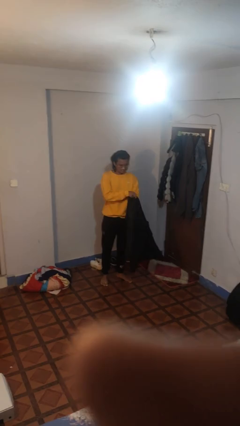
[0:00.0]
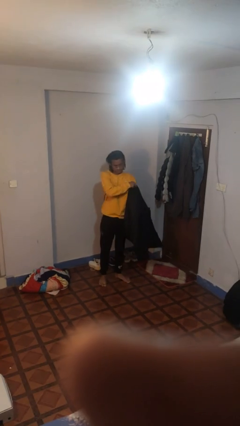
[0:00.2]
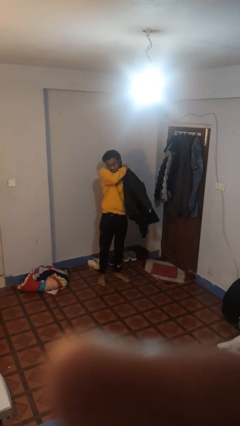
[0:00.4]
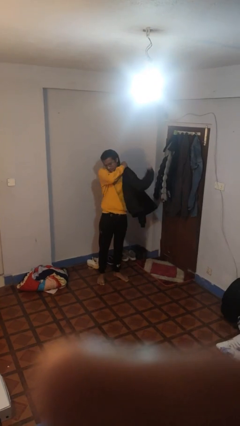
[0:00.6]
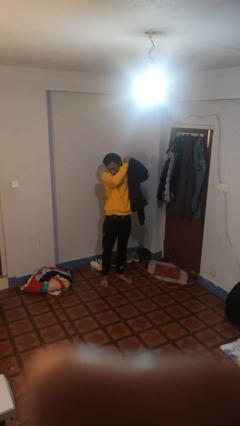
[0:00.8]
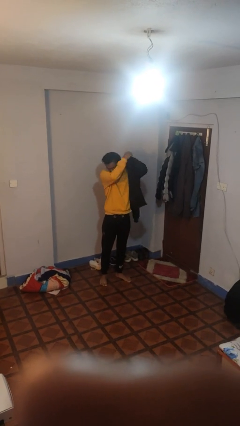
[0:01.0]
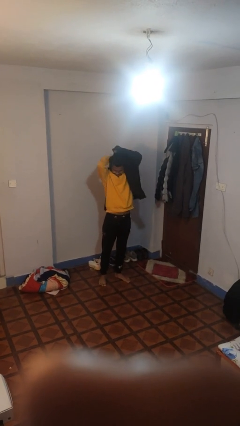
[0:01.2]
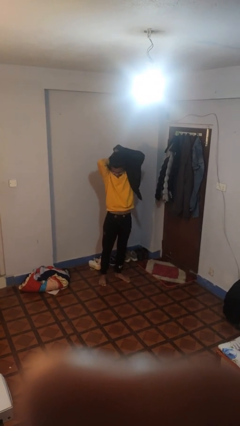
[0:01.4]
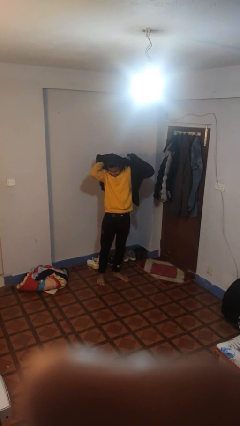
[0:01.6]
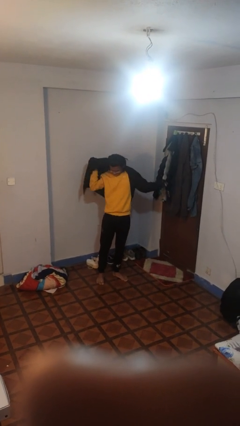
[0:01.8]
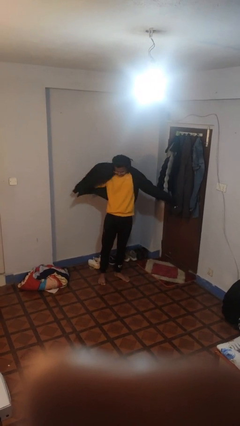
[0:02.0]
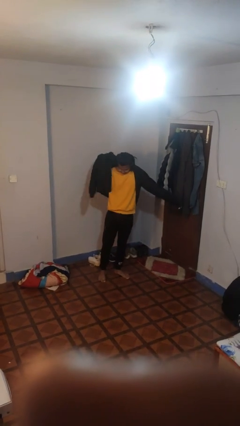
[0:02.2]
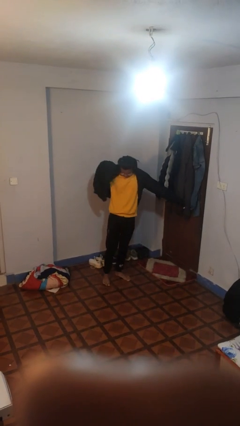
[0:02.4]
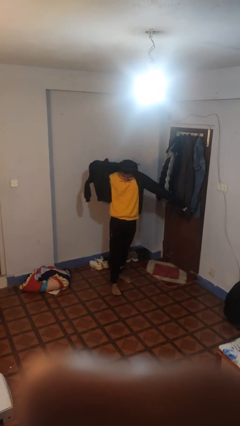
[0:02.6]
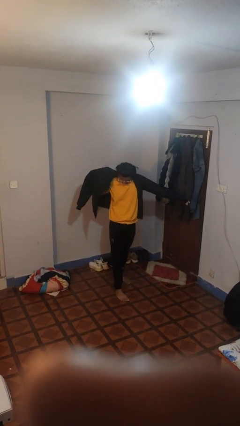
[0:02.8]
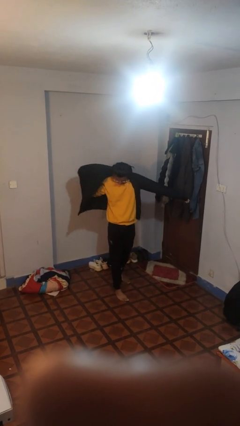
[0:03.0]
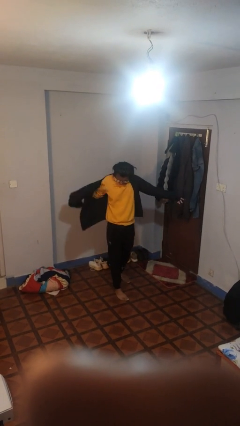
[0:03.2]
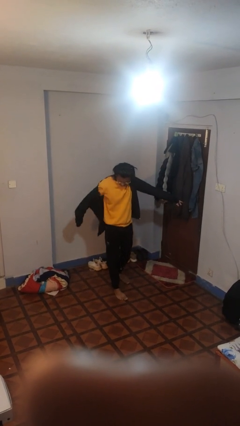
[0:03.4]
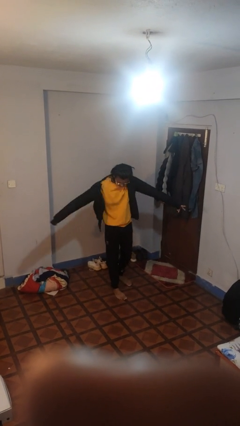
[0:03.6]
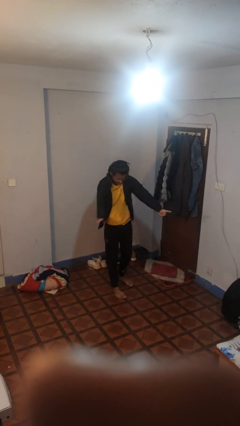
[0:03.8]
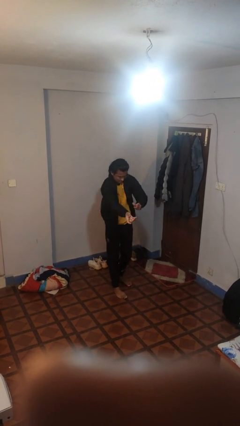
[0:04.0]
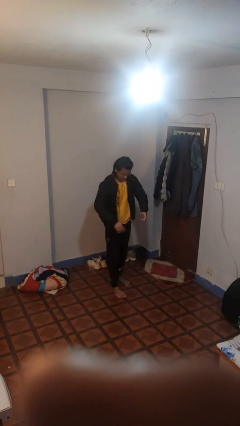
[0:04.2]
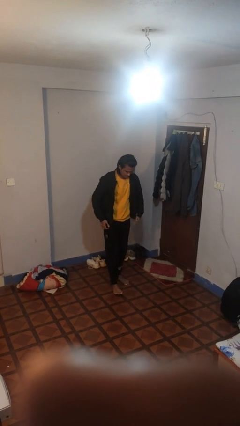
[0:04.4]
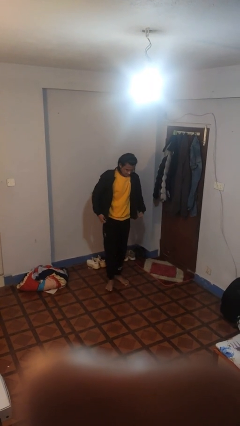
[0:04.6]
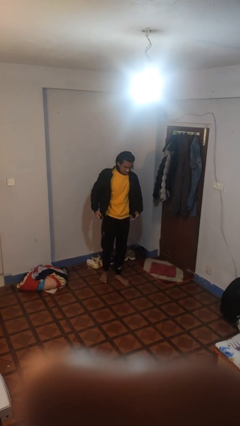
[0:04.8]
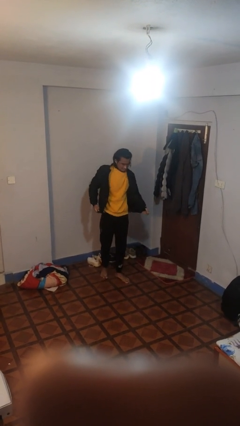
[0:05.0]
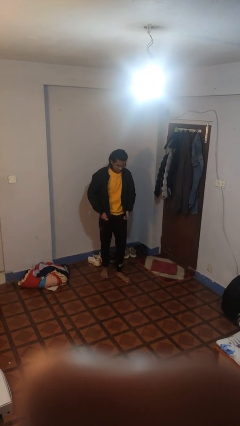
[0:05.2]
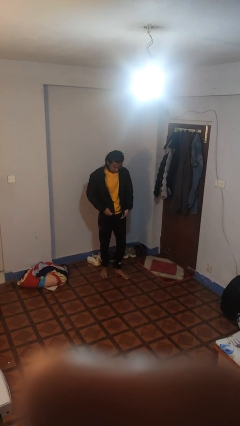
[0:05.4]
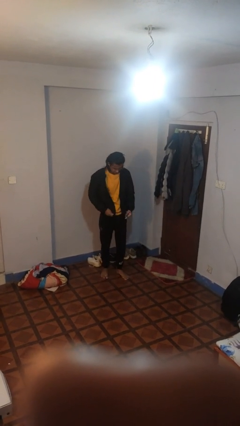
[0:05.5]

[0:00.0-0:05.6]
person puts on jacket

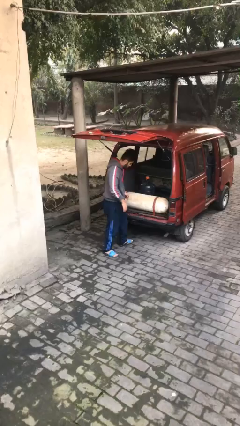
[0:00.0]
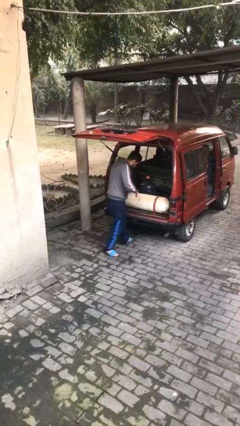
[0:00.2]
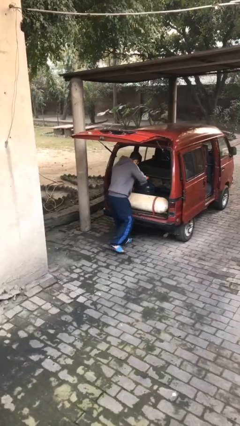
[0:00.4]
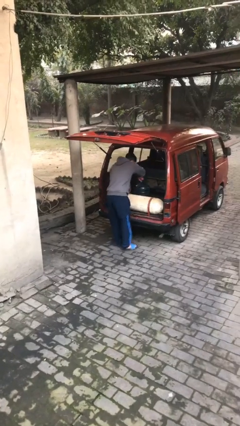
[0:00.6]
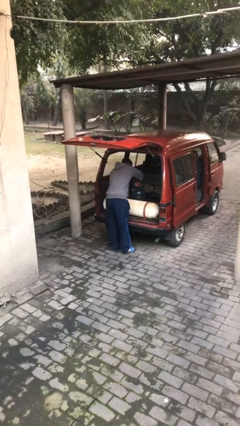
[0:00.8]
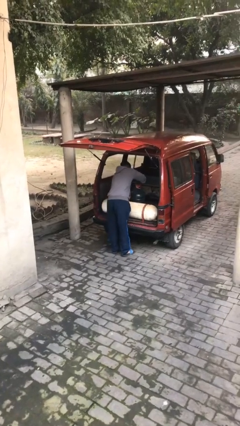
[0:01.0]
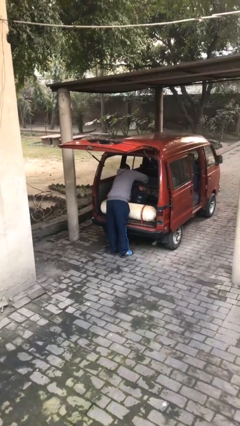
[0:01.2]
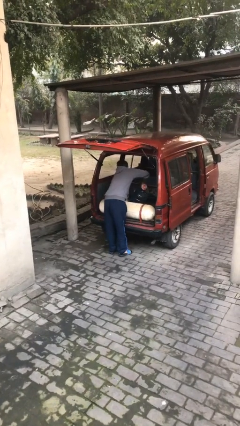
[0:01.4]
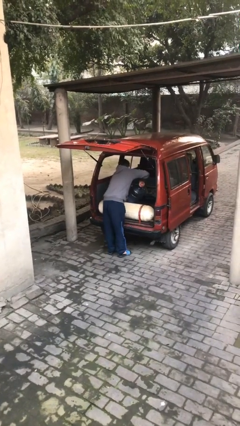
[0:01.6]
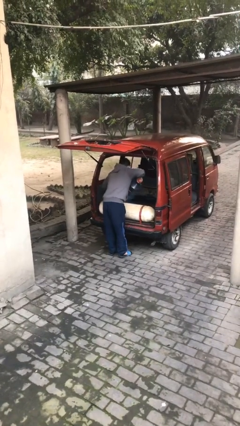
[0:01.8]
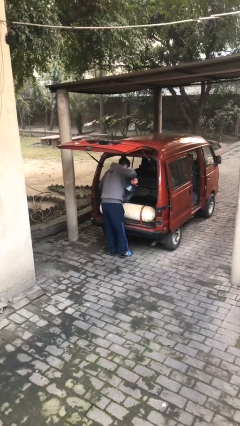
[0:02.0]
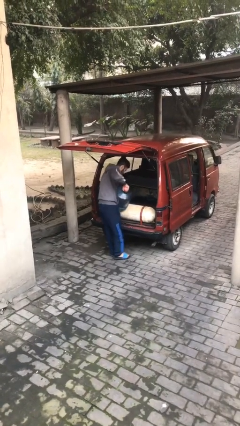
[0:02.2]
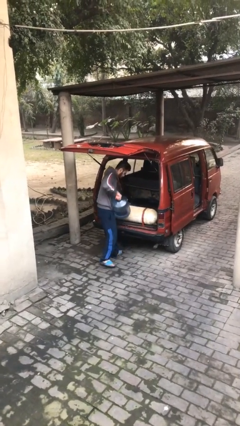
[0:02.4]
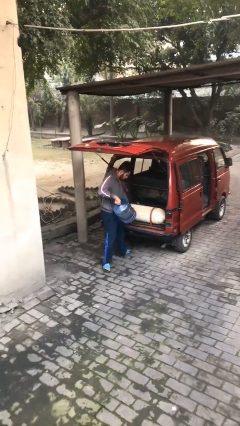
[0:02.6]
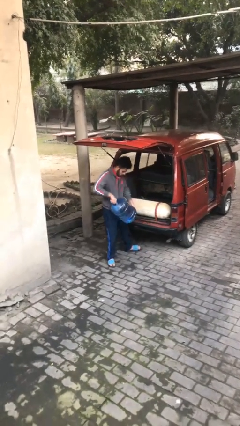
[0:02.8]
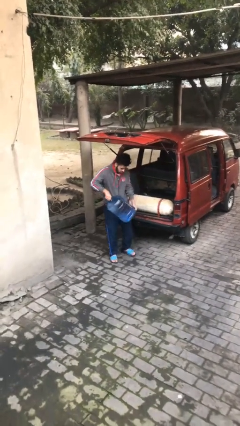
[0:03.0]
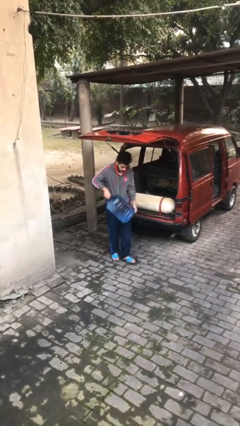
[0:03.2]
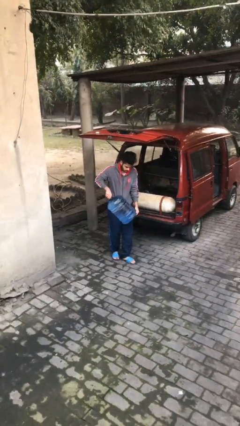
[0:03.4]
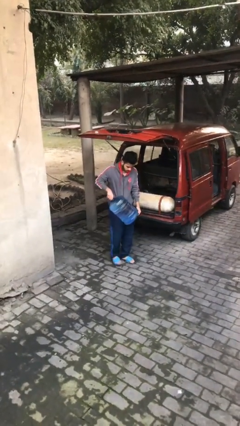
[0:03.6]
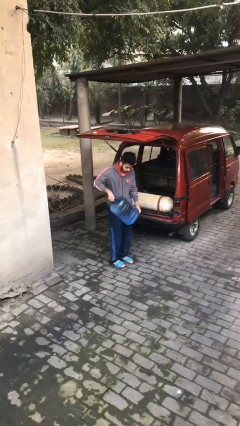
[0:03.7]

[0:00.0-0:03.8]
person unloads car

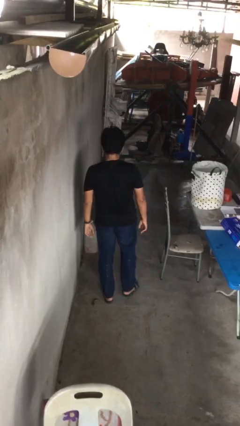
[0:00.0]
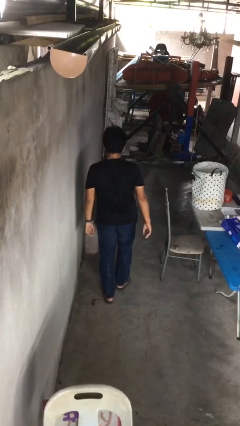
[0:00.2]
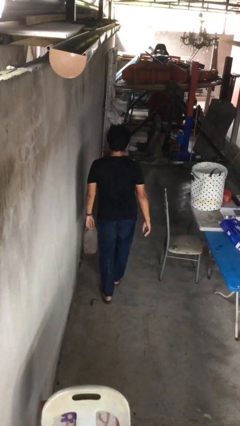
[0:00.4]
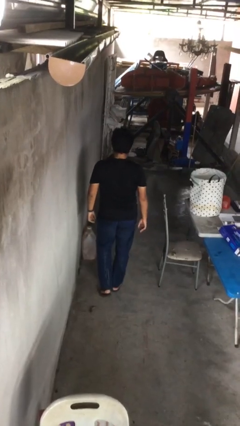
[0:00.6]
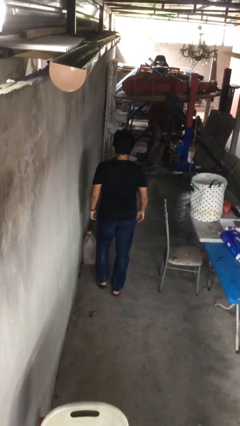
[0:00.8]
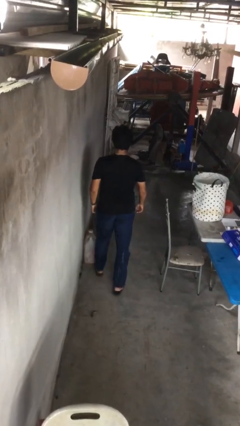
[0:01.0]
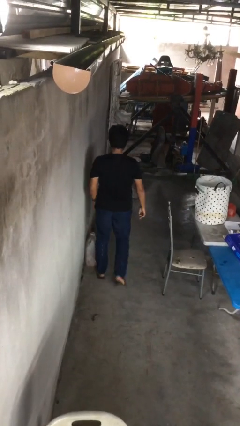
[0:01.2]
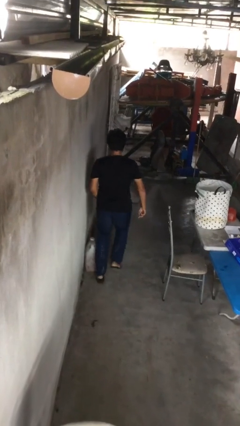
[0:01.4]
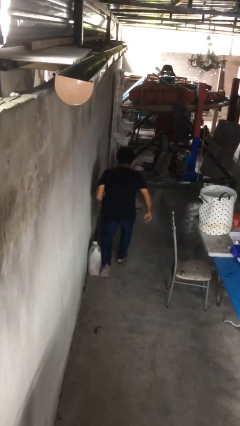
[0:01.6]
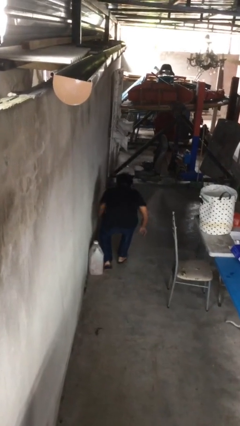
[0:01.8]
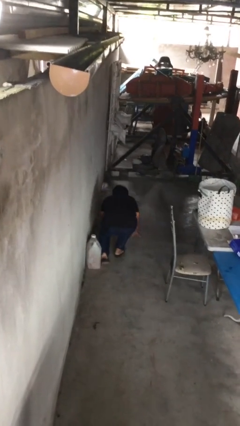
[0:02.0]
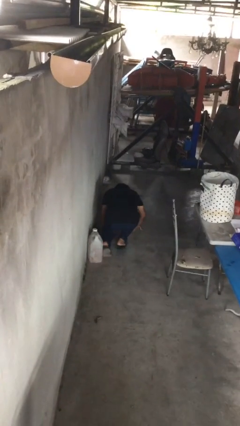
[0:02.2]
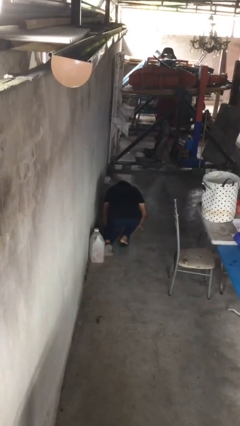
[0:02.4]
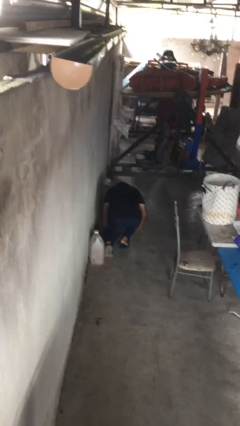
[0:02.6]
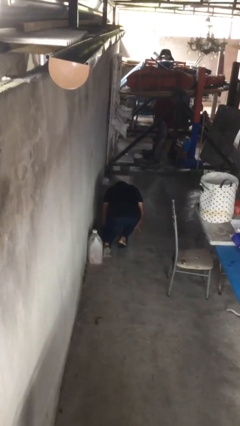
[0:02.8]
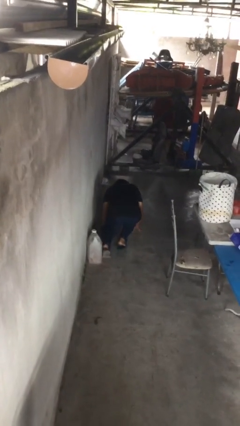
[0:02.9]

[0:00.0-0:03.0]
person trips on object on floor

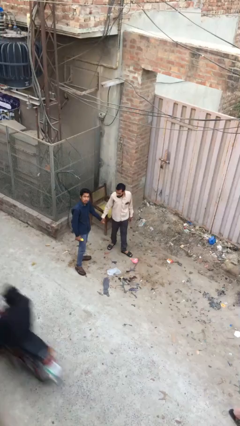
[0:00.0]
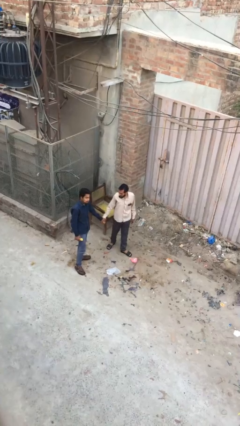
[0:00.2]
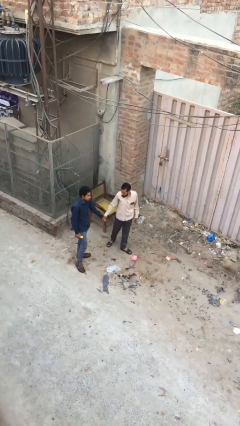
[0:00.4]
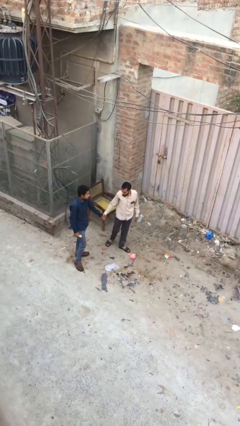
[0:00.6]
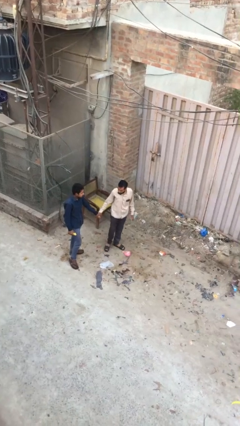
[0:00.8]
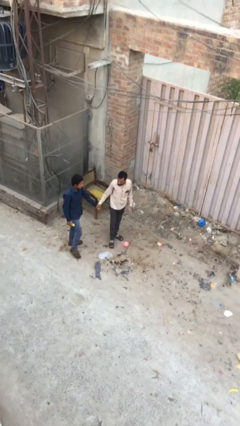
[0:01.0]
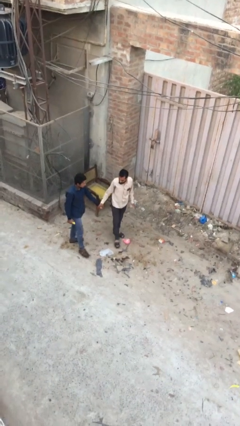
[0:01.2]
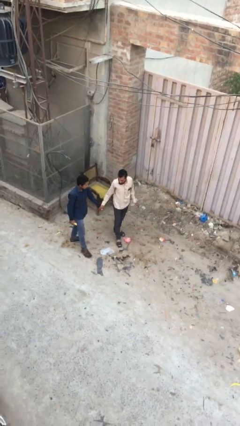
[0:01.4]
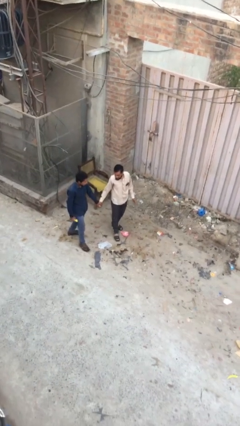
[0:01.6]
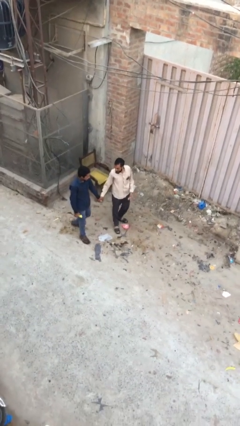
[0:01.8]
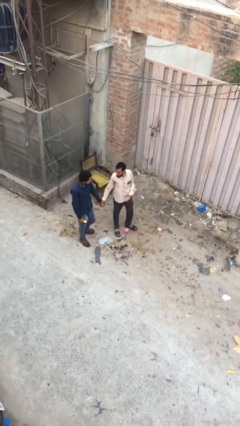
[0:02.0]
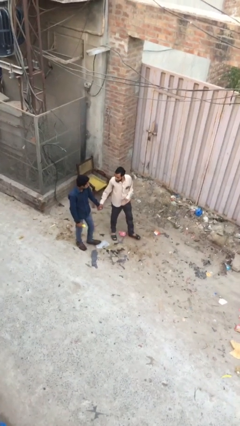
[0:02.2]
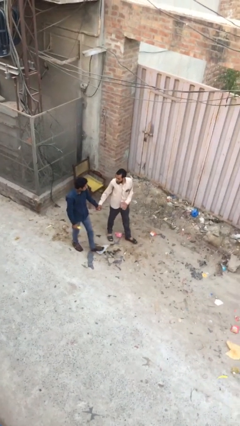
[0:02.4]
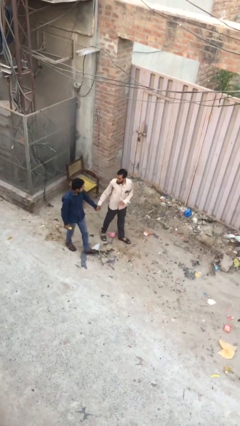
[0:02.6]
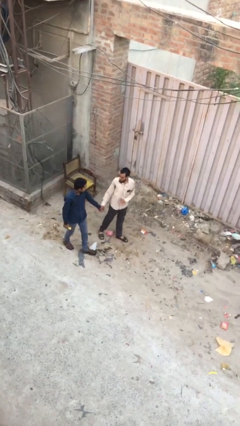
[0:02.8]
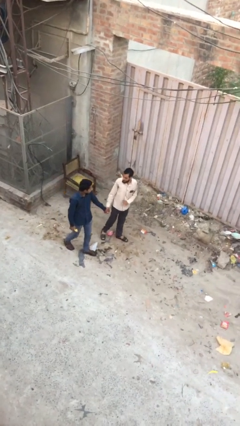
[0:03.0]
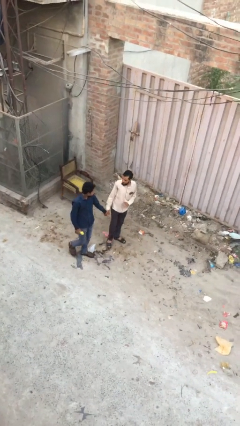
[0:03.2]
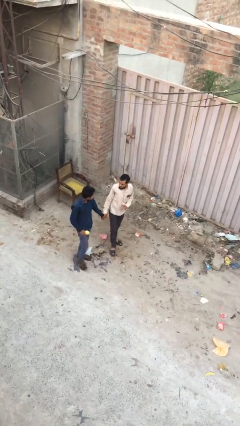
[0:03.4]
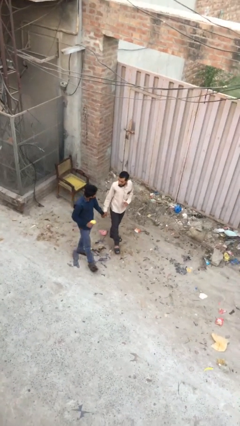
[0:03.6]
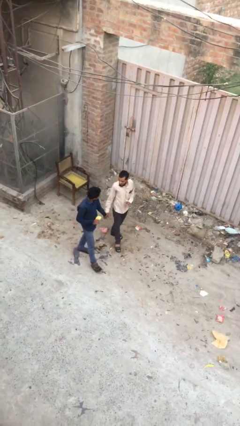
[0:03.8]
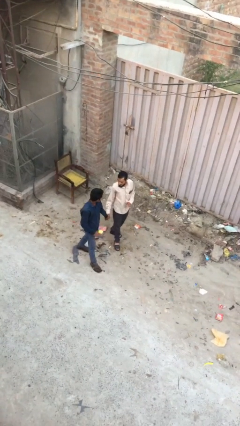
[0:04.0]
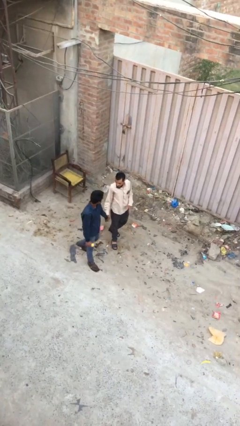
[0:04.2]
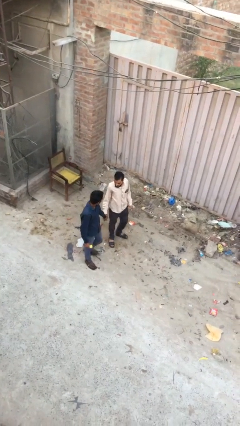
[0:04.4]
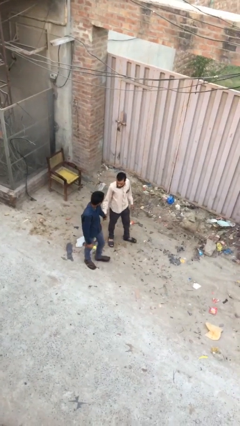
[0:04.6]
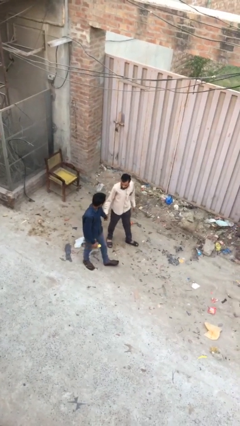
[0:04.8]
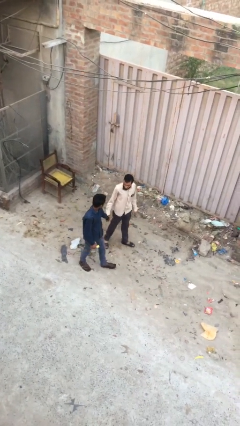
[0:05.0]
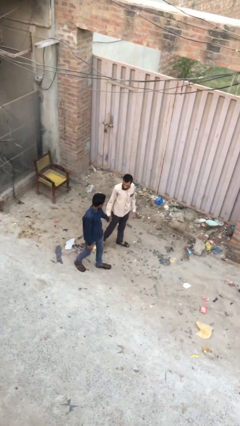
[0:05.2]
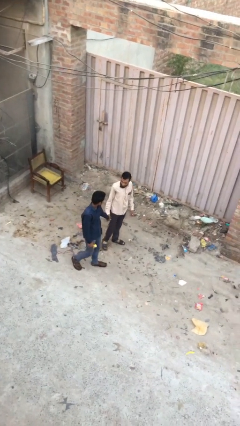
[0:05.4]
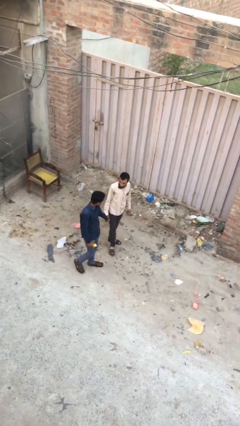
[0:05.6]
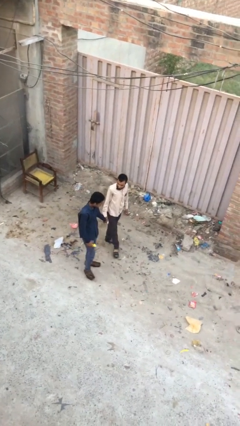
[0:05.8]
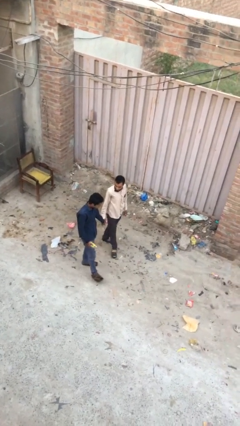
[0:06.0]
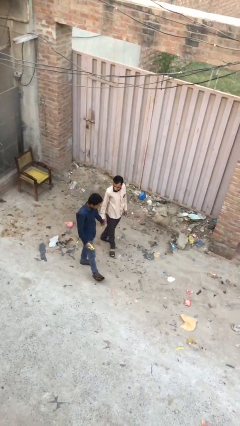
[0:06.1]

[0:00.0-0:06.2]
person holds hand
